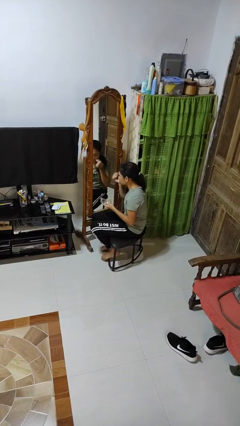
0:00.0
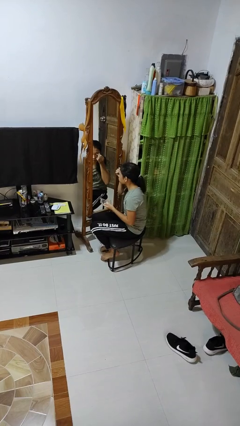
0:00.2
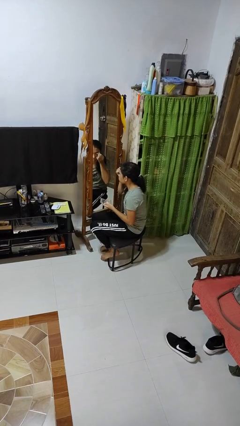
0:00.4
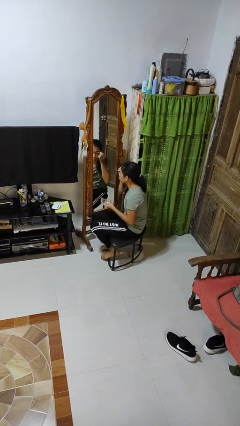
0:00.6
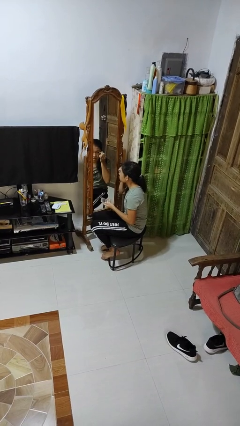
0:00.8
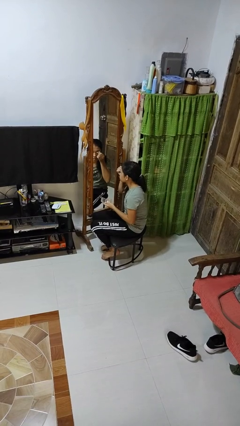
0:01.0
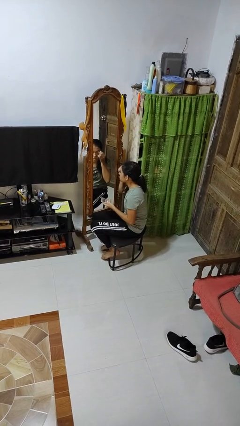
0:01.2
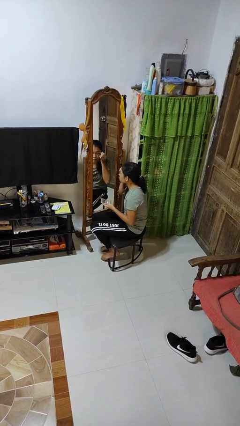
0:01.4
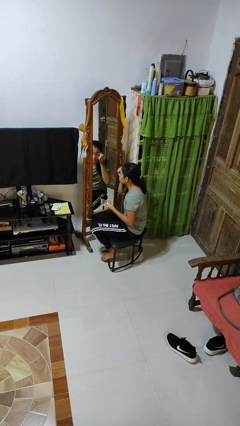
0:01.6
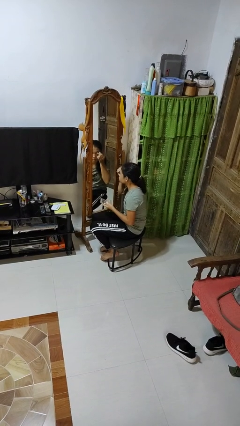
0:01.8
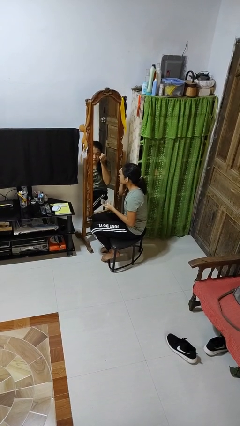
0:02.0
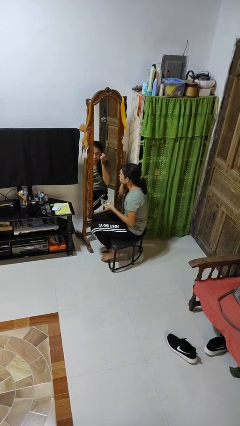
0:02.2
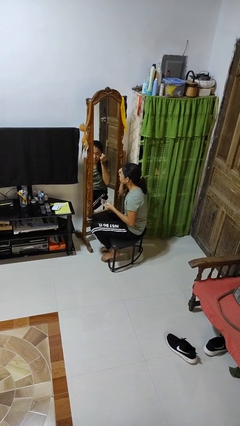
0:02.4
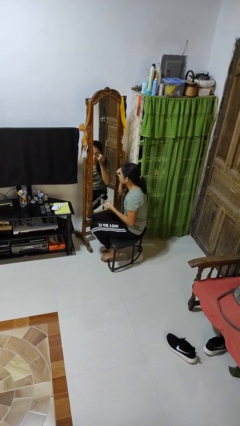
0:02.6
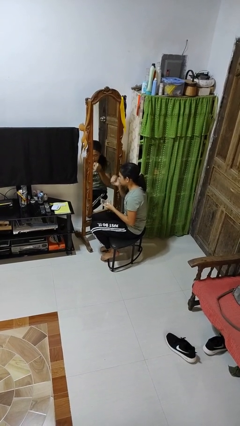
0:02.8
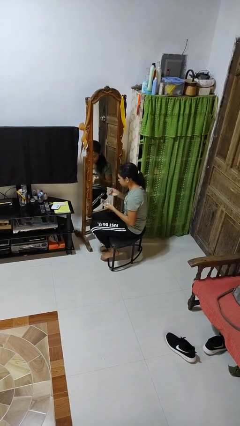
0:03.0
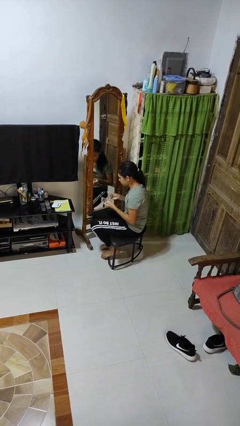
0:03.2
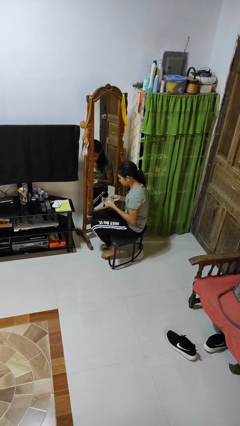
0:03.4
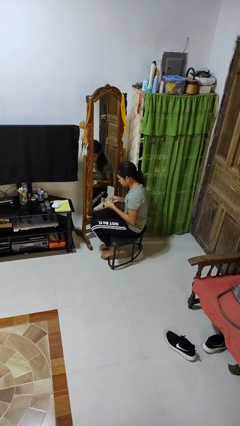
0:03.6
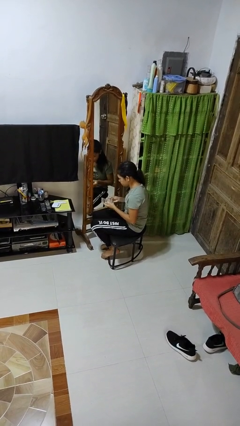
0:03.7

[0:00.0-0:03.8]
person applies eye makeup

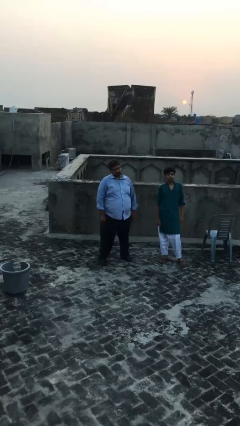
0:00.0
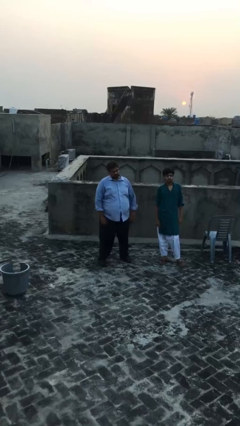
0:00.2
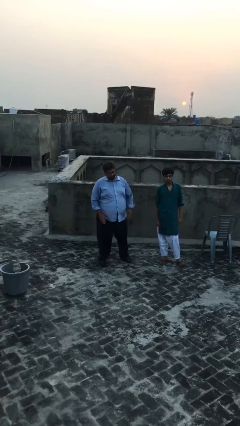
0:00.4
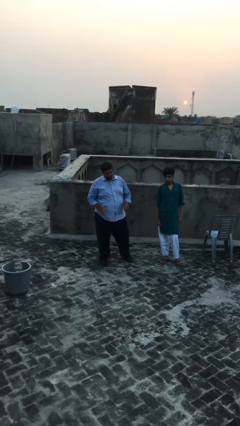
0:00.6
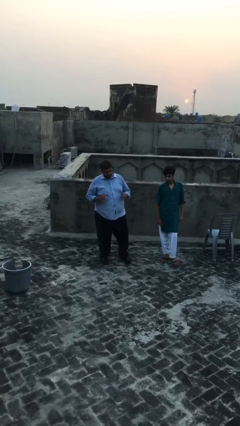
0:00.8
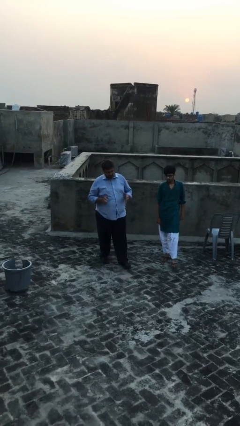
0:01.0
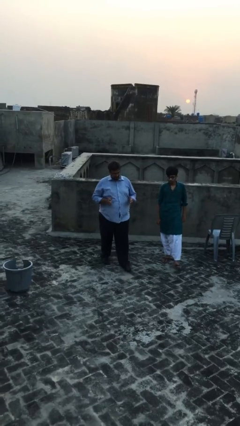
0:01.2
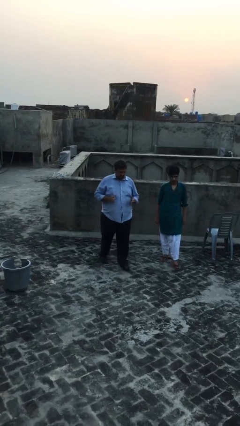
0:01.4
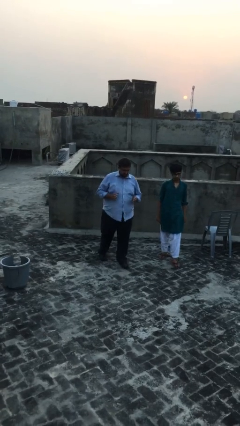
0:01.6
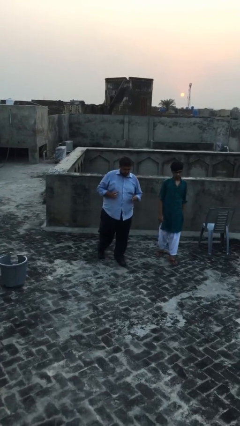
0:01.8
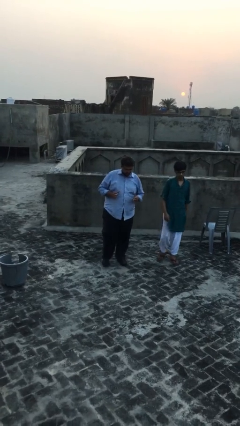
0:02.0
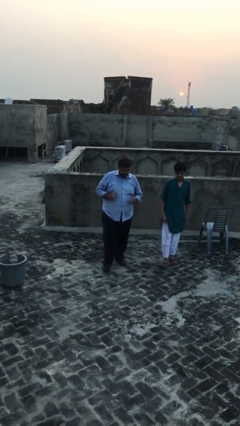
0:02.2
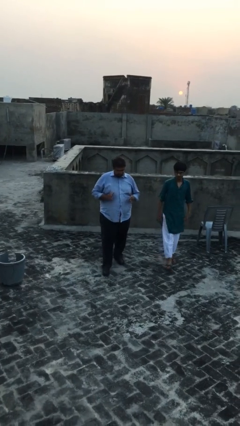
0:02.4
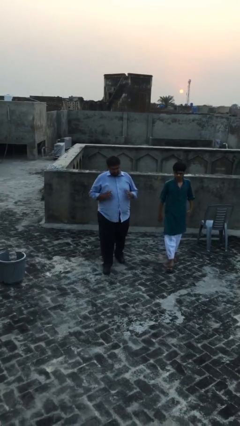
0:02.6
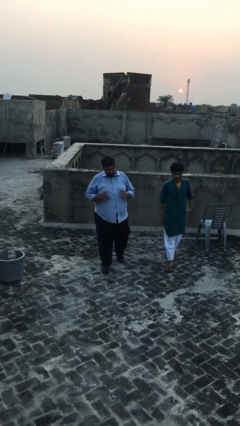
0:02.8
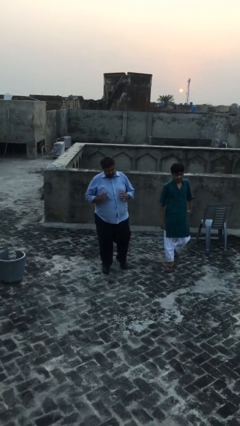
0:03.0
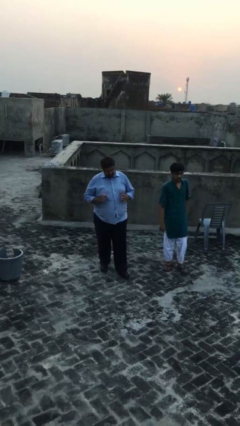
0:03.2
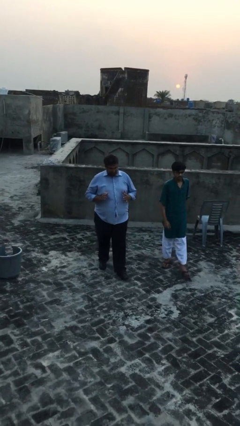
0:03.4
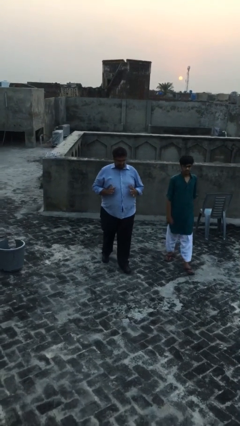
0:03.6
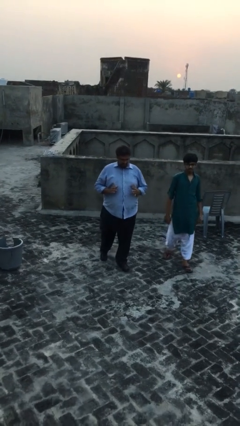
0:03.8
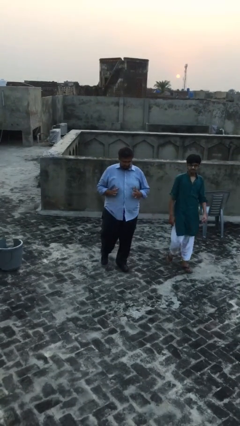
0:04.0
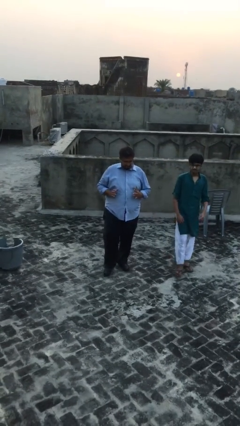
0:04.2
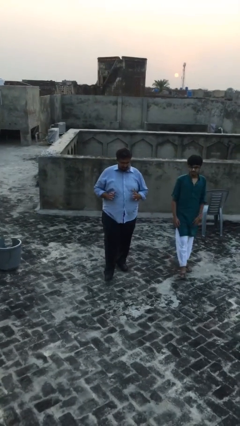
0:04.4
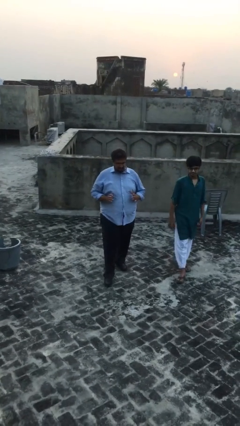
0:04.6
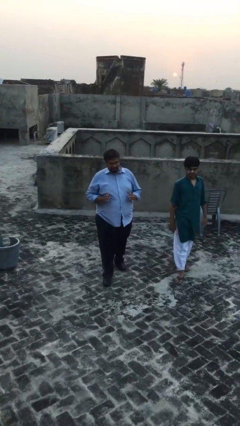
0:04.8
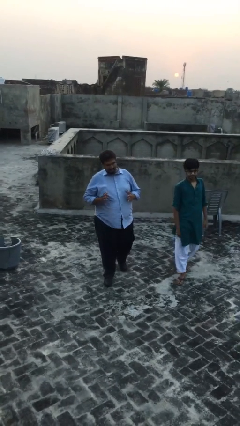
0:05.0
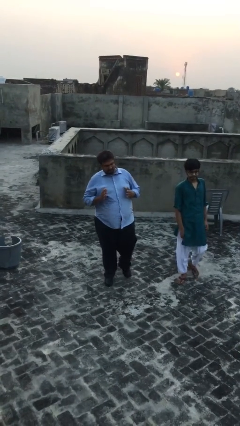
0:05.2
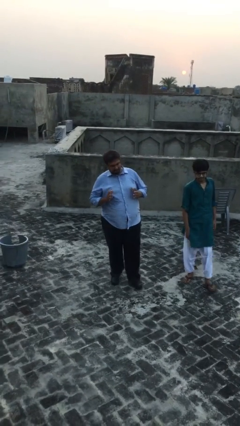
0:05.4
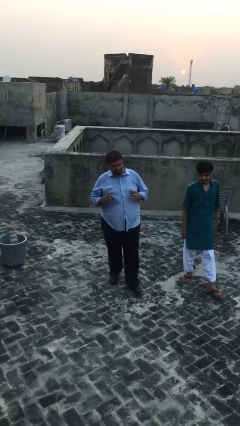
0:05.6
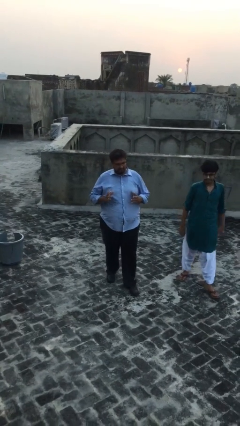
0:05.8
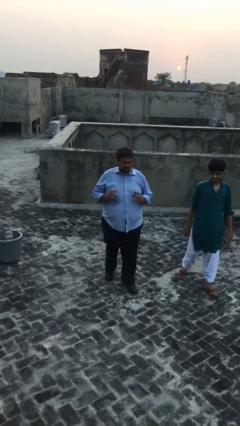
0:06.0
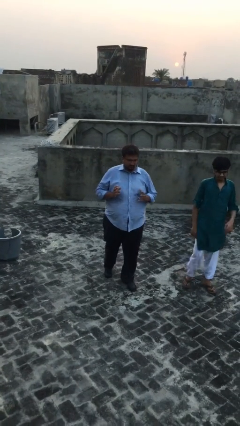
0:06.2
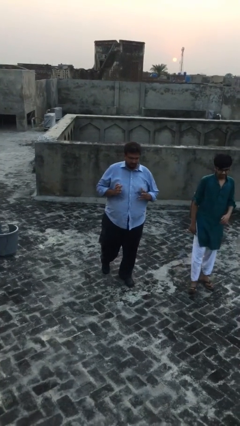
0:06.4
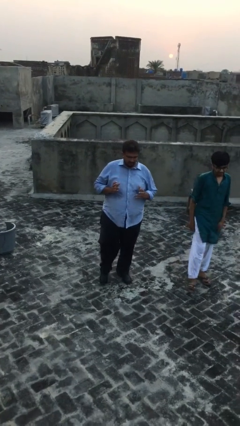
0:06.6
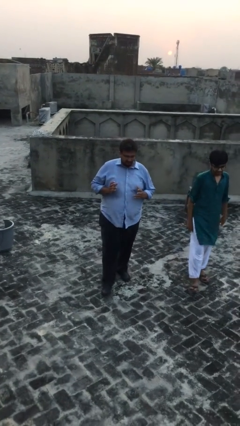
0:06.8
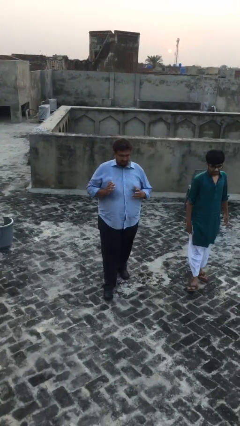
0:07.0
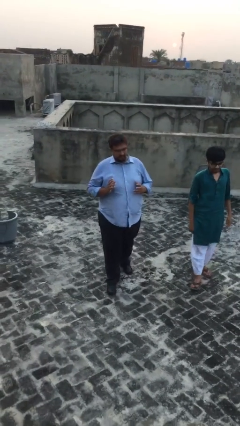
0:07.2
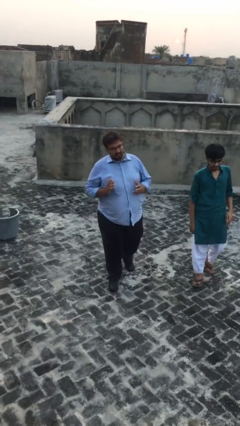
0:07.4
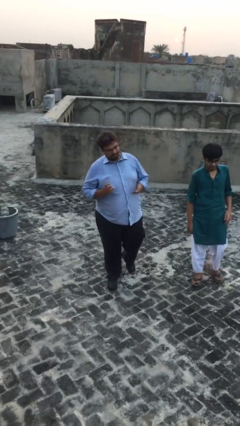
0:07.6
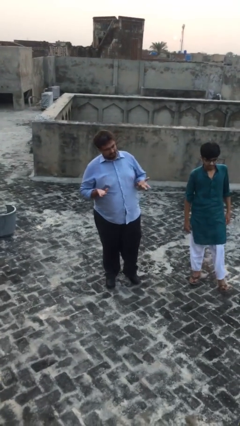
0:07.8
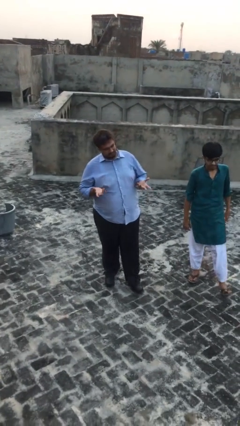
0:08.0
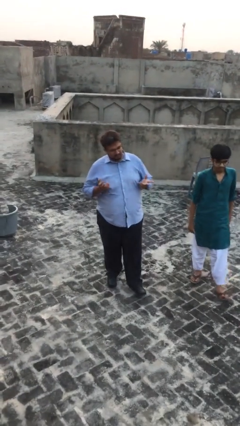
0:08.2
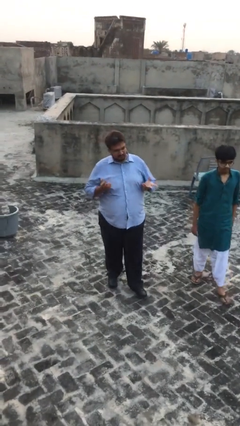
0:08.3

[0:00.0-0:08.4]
person talks to person

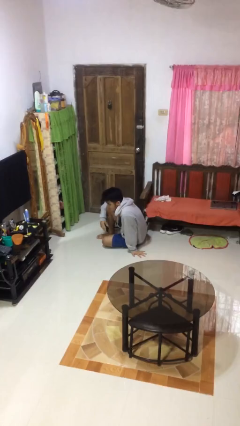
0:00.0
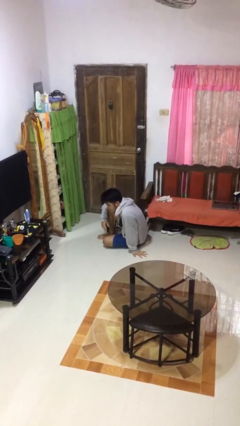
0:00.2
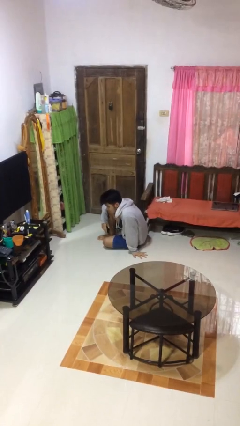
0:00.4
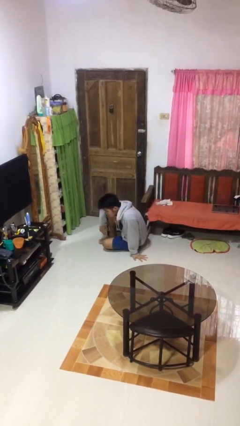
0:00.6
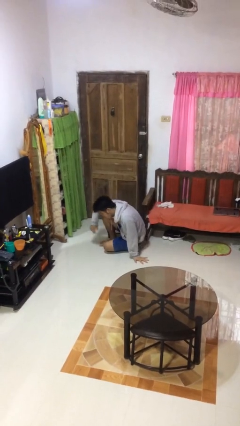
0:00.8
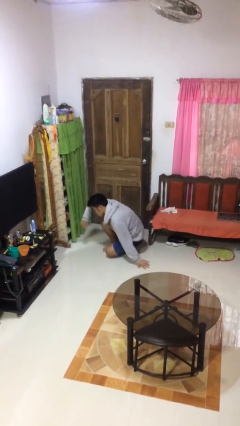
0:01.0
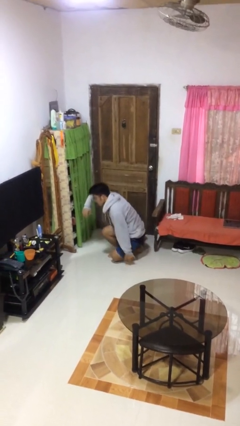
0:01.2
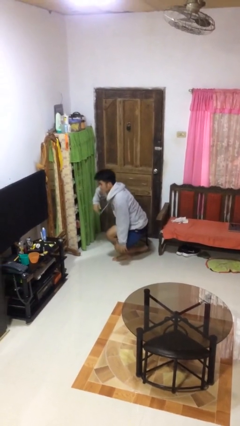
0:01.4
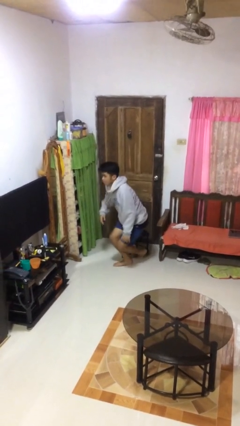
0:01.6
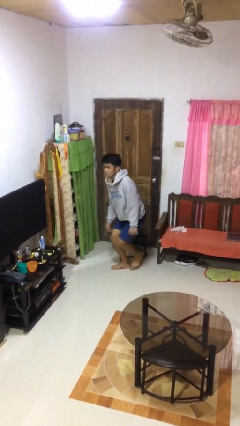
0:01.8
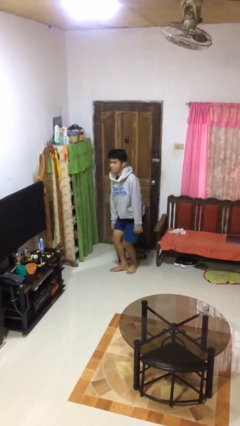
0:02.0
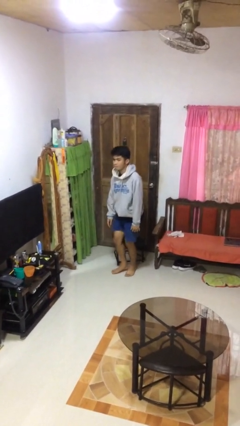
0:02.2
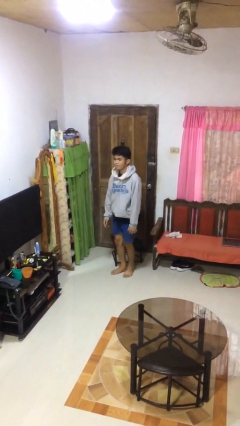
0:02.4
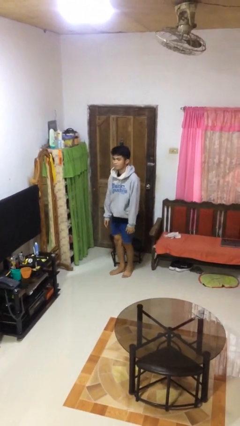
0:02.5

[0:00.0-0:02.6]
person stands up from floor

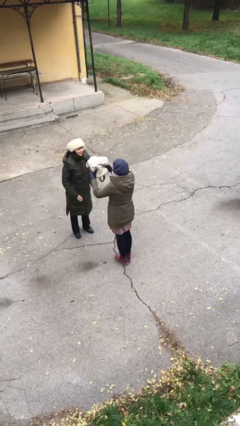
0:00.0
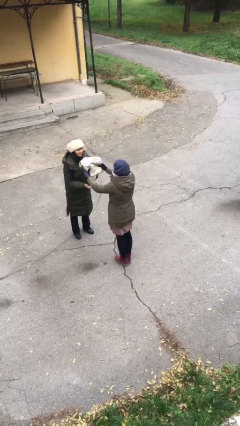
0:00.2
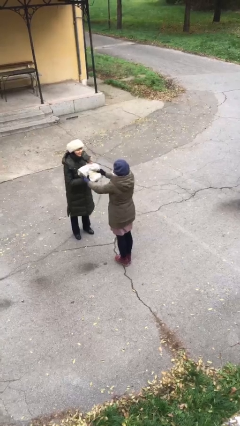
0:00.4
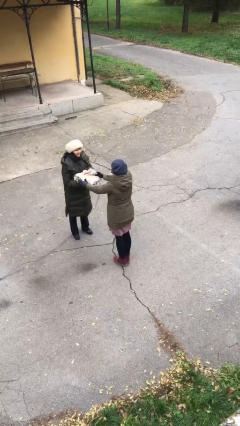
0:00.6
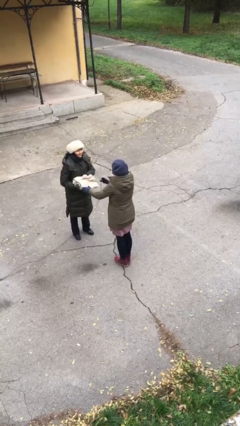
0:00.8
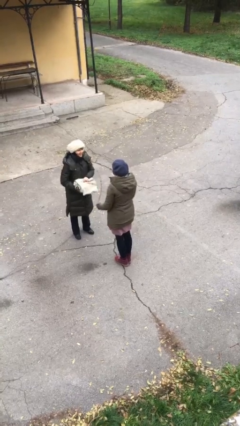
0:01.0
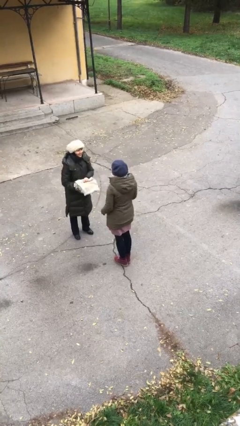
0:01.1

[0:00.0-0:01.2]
person transfers object to person

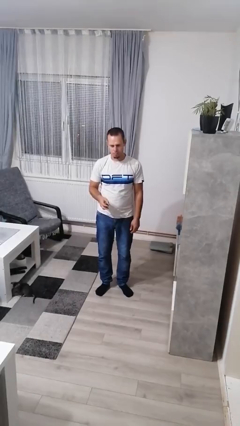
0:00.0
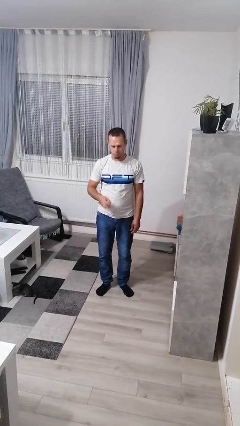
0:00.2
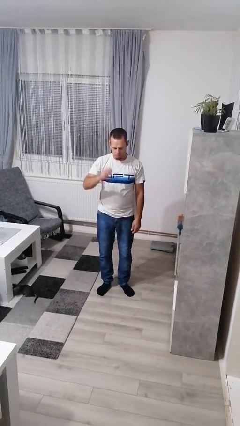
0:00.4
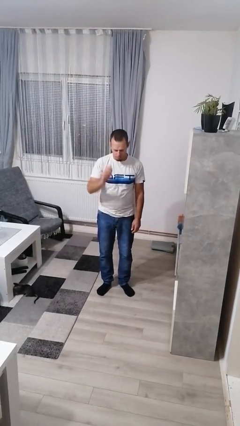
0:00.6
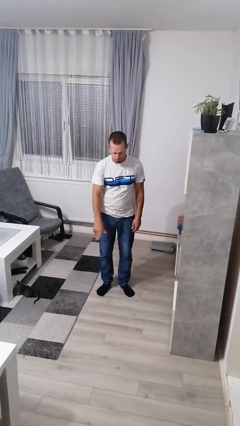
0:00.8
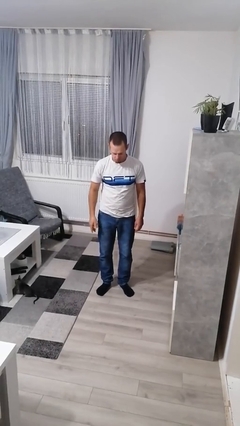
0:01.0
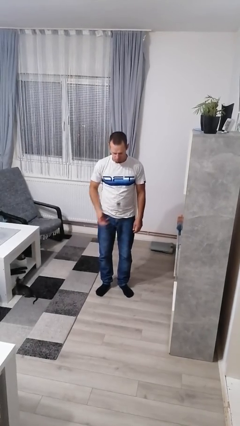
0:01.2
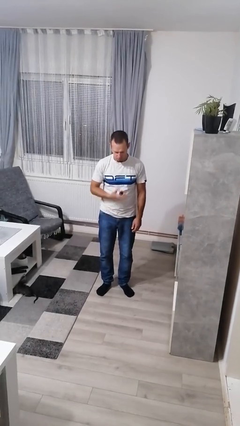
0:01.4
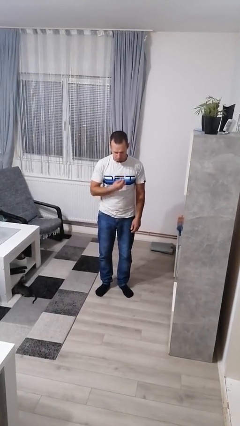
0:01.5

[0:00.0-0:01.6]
person bounces ball on floor
